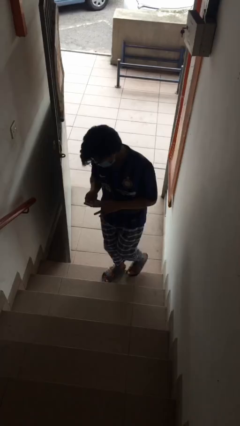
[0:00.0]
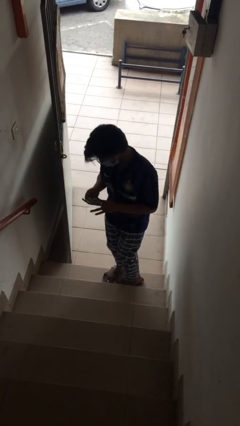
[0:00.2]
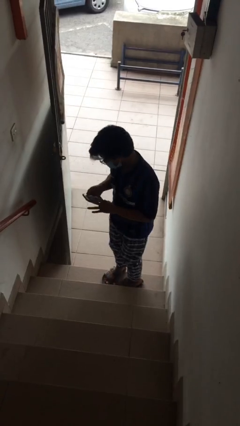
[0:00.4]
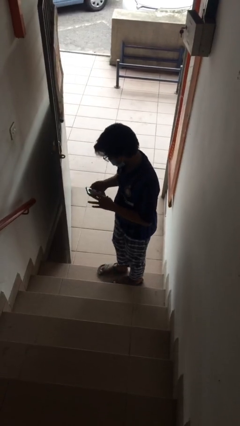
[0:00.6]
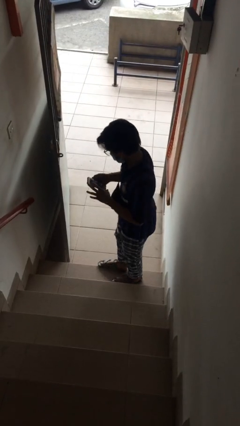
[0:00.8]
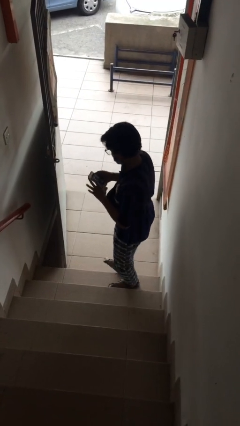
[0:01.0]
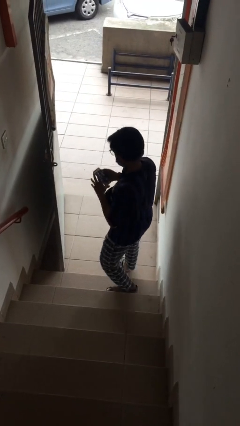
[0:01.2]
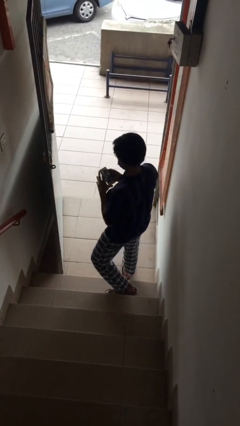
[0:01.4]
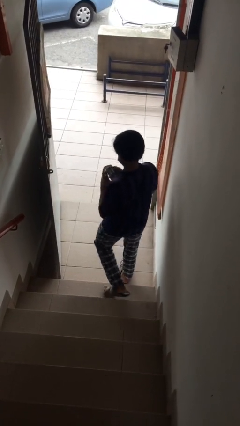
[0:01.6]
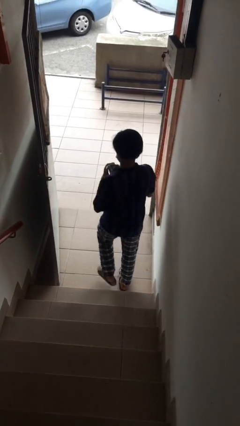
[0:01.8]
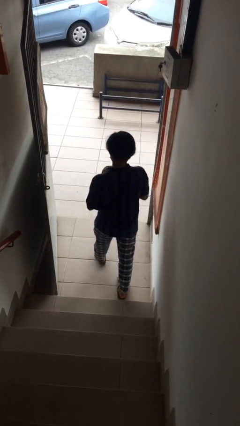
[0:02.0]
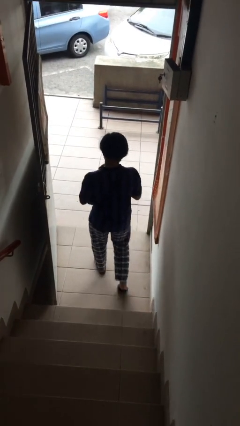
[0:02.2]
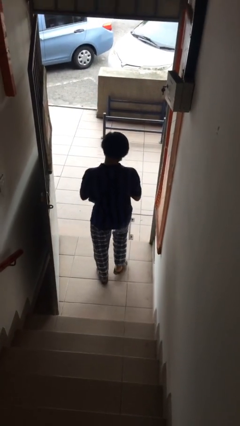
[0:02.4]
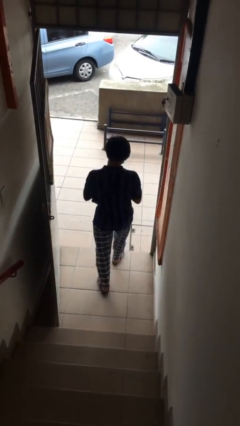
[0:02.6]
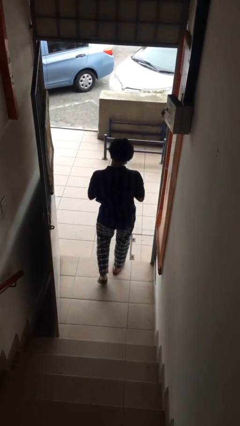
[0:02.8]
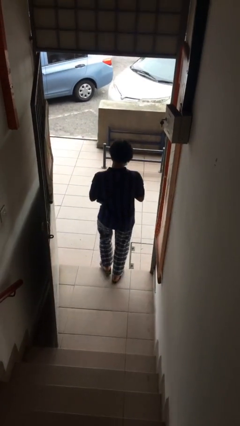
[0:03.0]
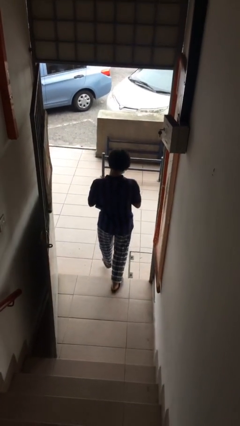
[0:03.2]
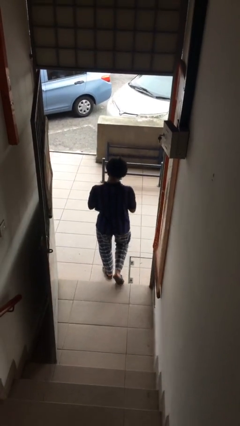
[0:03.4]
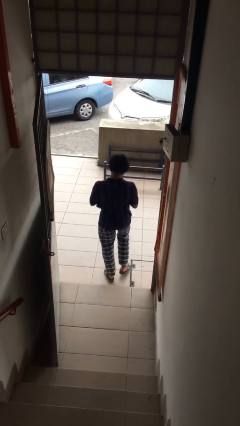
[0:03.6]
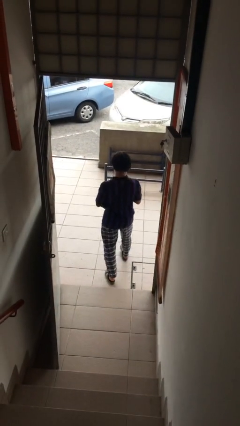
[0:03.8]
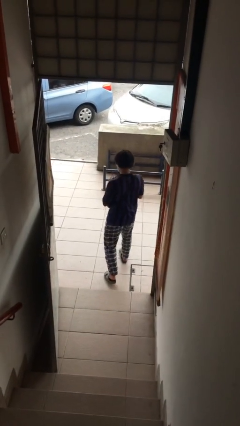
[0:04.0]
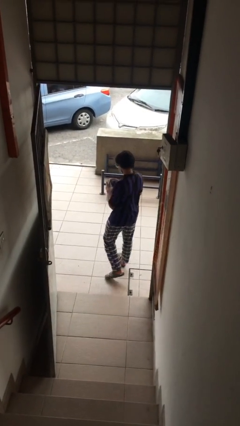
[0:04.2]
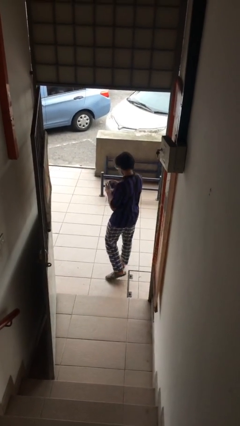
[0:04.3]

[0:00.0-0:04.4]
person exits scene through structure

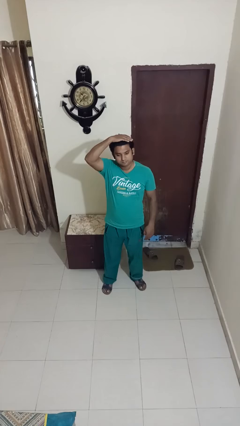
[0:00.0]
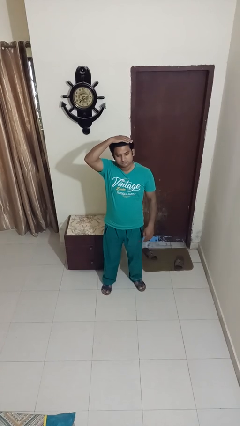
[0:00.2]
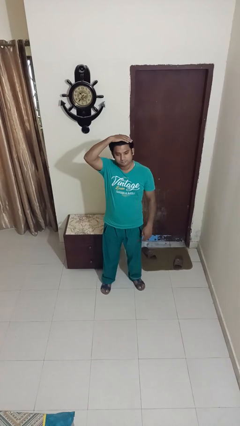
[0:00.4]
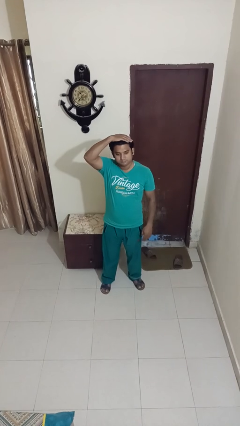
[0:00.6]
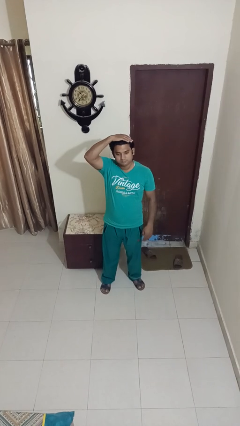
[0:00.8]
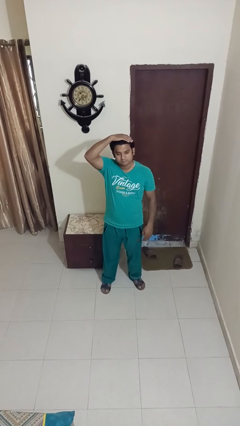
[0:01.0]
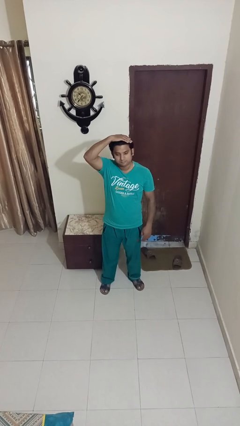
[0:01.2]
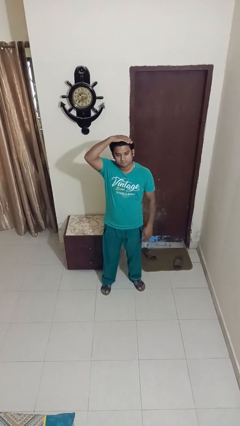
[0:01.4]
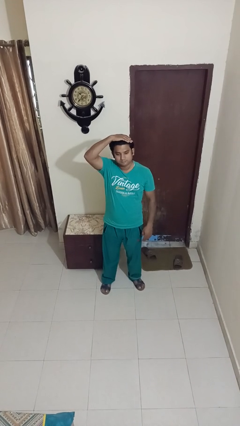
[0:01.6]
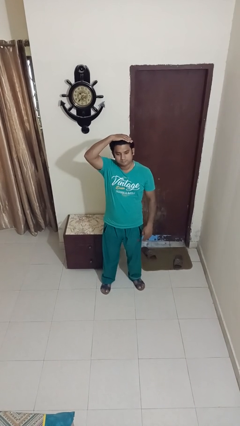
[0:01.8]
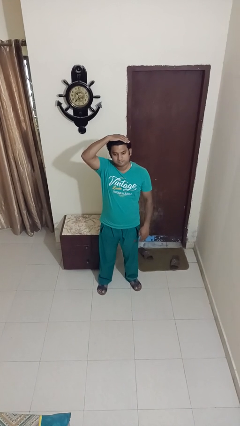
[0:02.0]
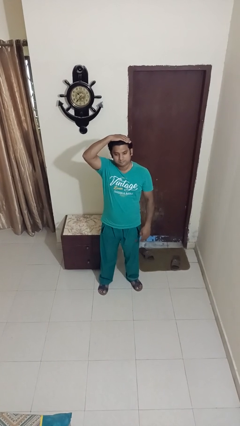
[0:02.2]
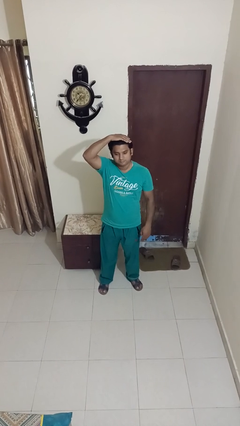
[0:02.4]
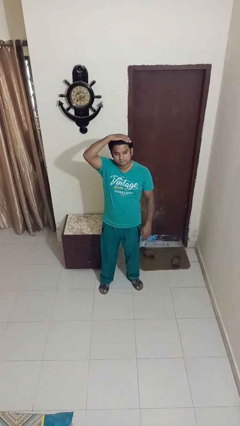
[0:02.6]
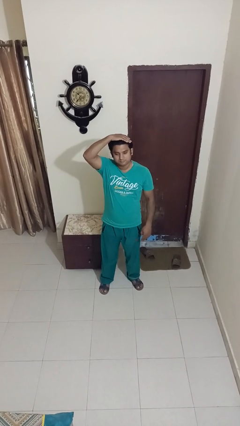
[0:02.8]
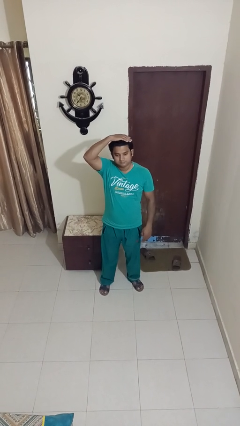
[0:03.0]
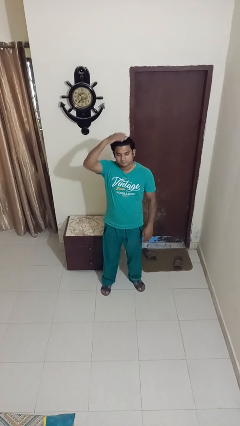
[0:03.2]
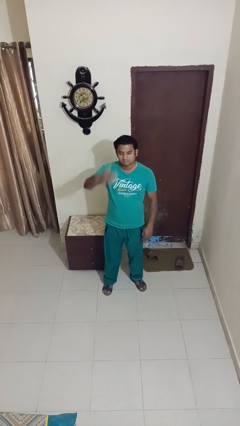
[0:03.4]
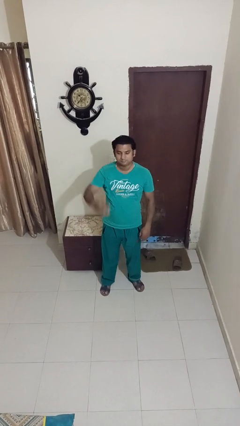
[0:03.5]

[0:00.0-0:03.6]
person pats head

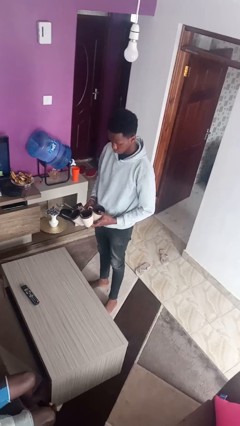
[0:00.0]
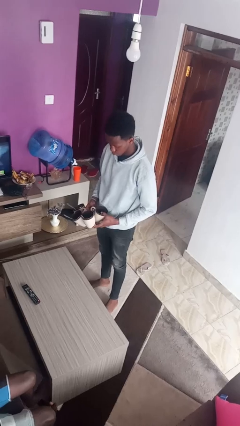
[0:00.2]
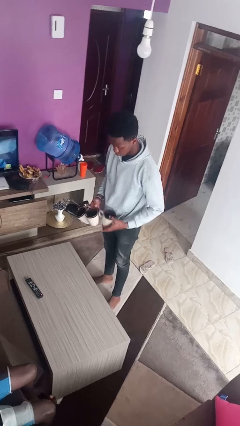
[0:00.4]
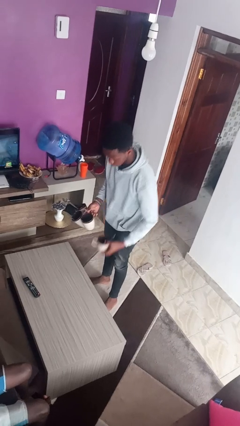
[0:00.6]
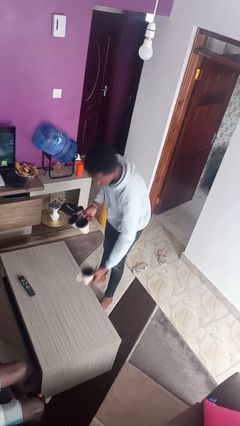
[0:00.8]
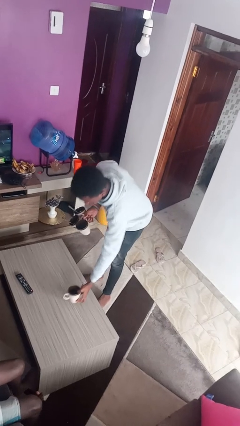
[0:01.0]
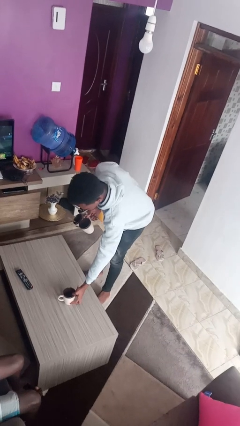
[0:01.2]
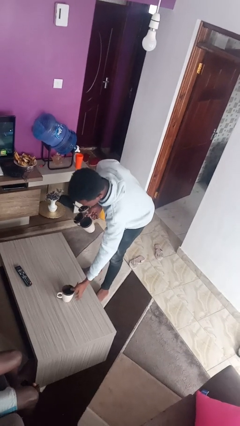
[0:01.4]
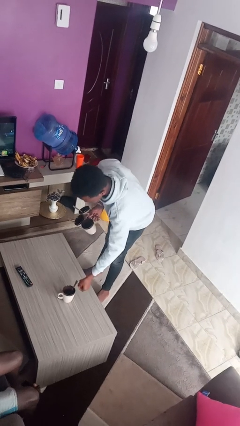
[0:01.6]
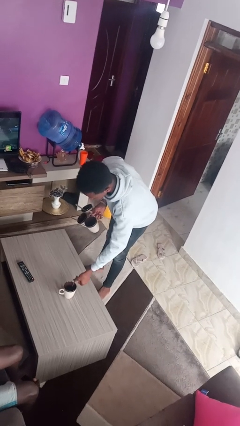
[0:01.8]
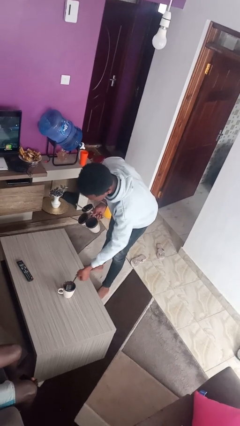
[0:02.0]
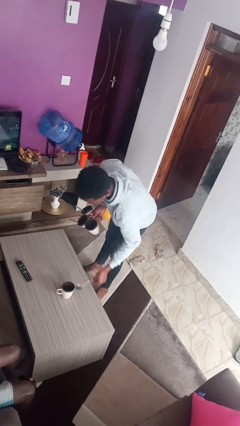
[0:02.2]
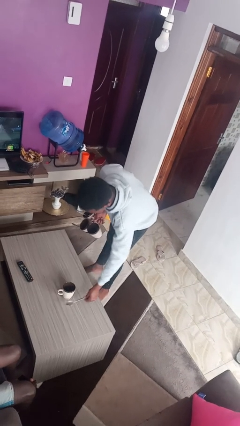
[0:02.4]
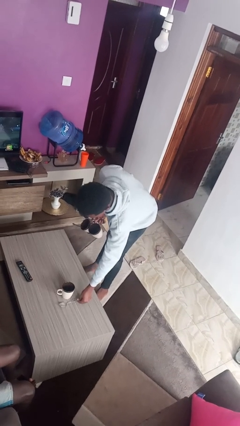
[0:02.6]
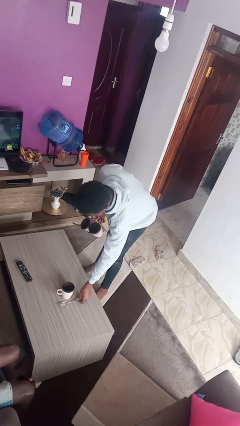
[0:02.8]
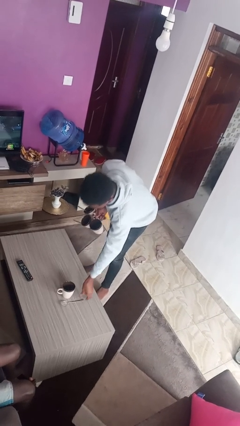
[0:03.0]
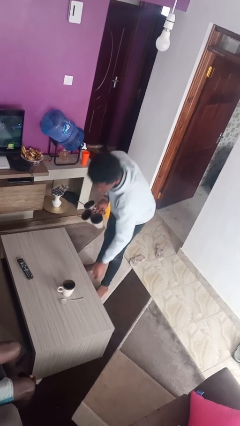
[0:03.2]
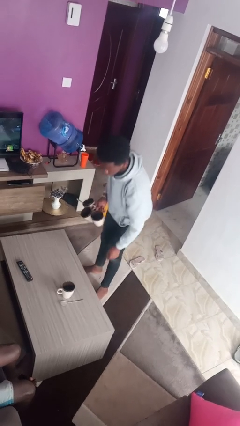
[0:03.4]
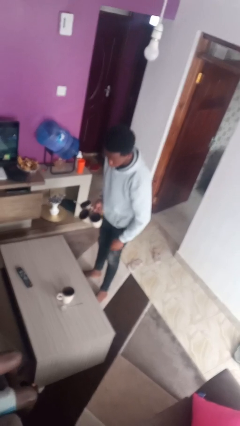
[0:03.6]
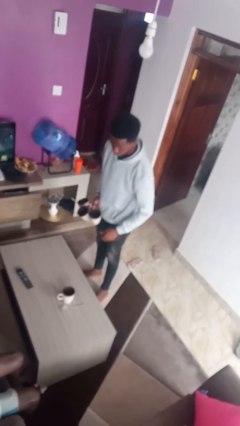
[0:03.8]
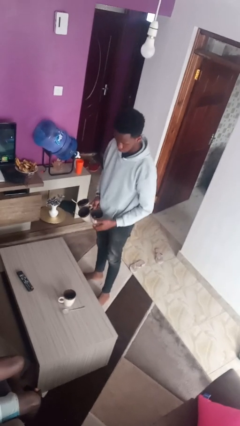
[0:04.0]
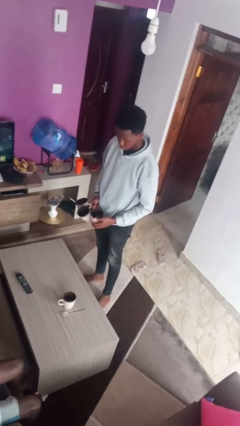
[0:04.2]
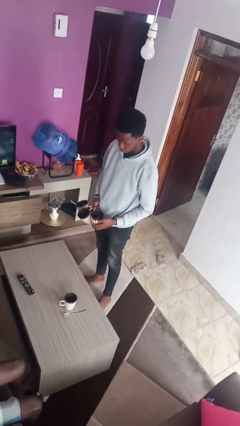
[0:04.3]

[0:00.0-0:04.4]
person sets table

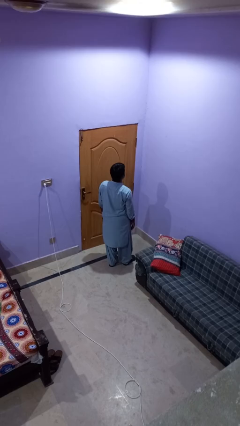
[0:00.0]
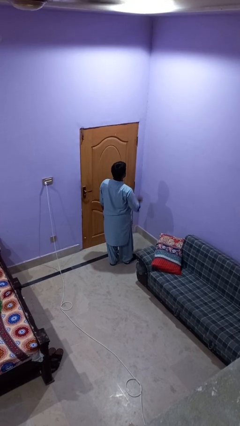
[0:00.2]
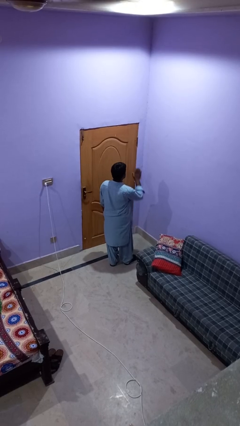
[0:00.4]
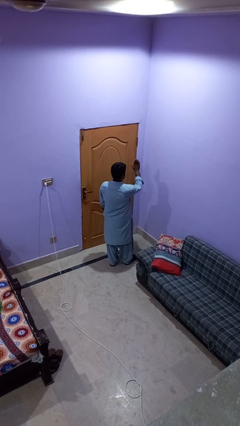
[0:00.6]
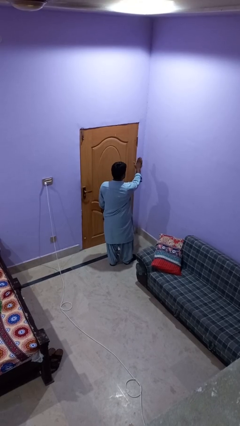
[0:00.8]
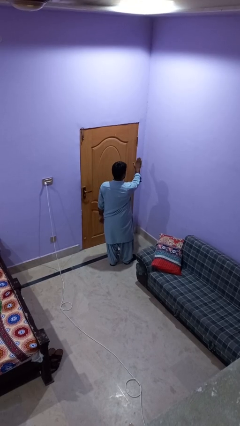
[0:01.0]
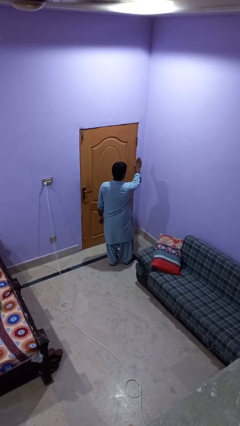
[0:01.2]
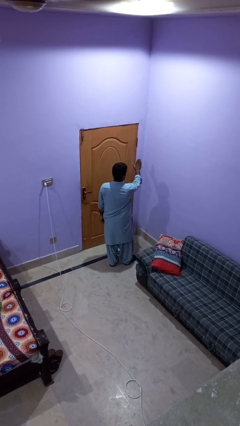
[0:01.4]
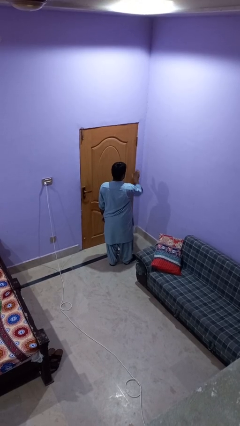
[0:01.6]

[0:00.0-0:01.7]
person gestures stop

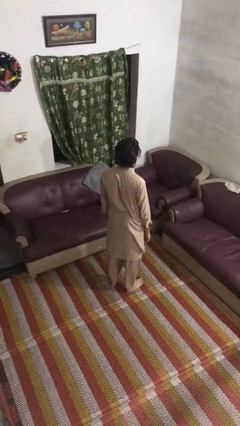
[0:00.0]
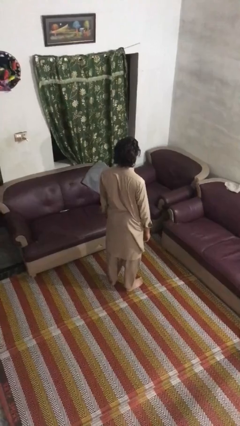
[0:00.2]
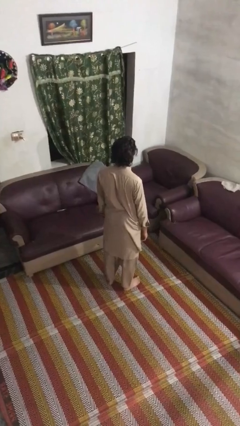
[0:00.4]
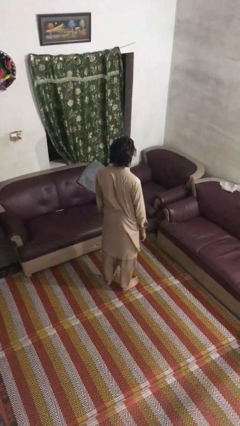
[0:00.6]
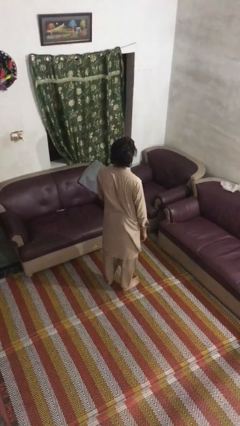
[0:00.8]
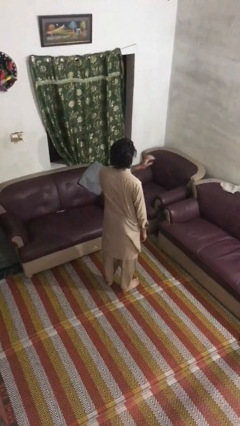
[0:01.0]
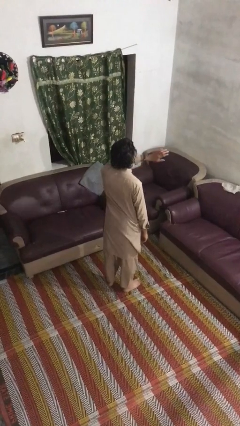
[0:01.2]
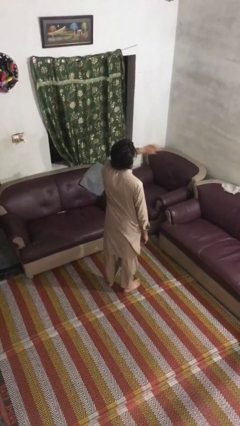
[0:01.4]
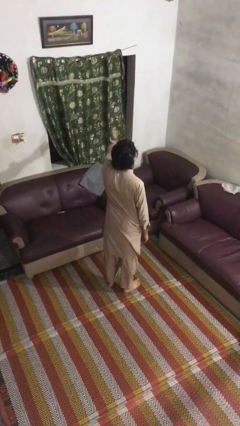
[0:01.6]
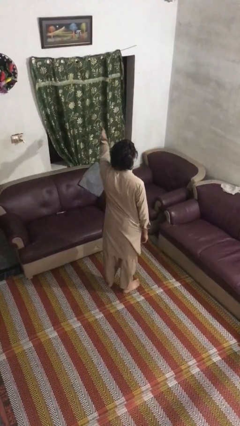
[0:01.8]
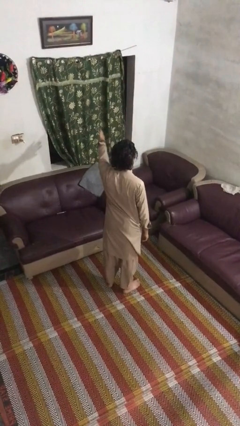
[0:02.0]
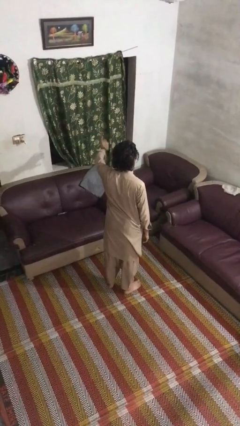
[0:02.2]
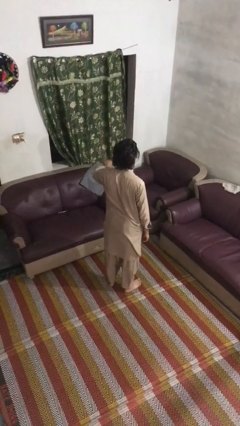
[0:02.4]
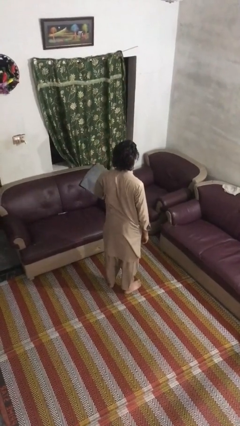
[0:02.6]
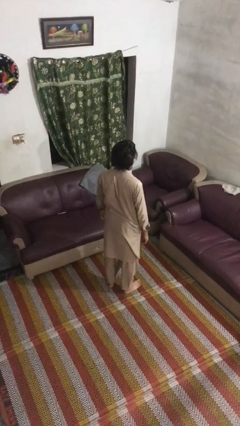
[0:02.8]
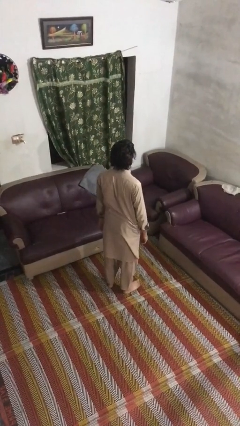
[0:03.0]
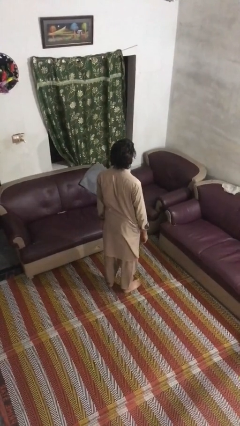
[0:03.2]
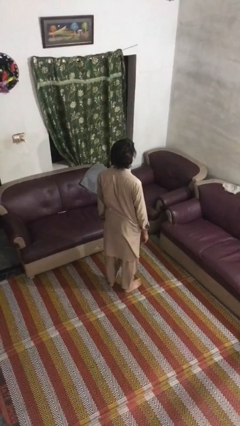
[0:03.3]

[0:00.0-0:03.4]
person gestures swipe left

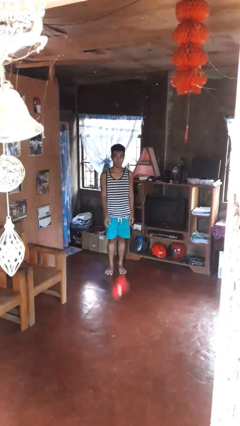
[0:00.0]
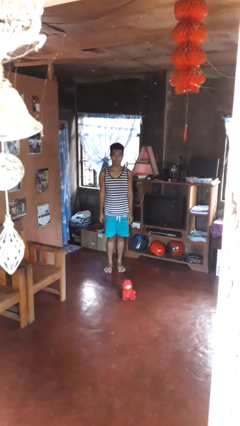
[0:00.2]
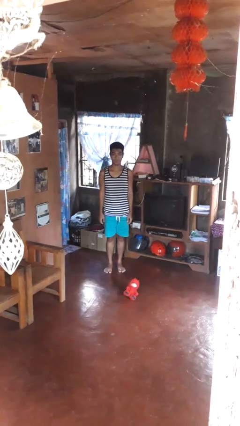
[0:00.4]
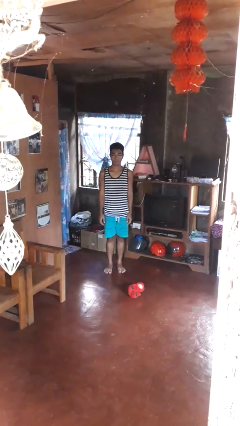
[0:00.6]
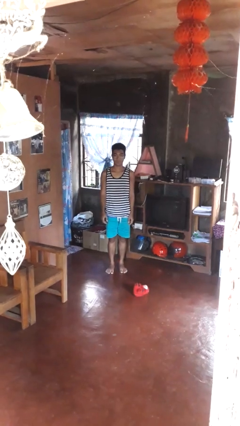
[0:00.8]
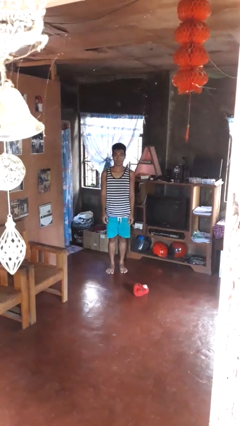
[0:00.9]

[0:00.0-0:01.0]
person throws object to ground
